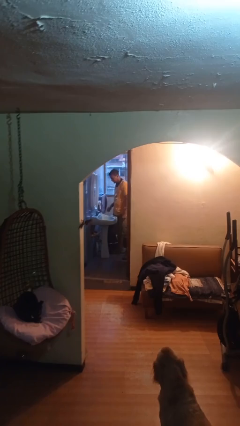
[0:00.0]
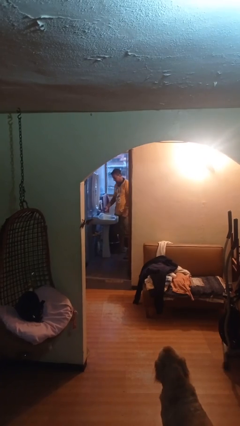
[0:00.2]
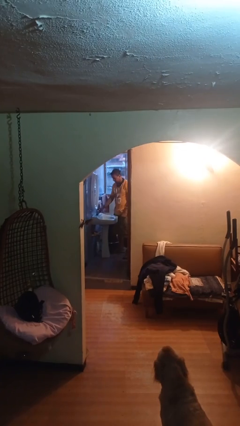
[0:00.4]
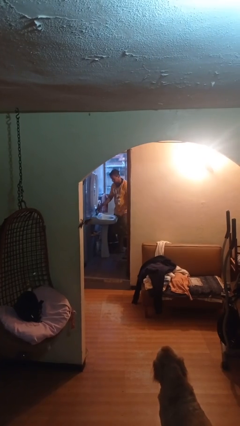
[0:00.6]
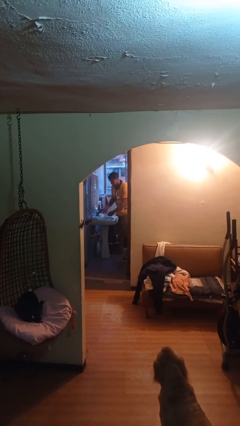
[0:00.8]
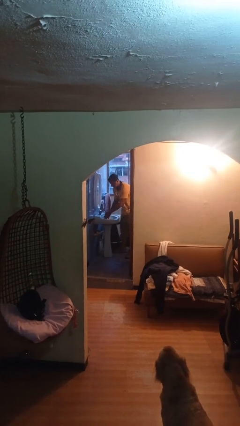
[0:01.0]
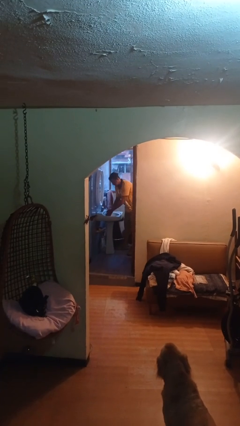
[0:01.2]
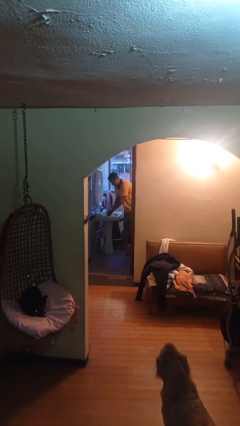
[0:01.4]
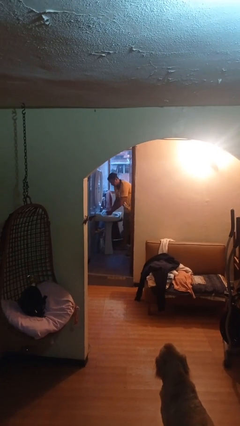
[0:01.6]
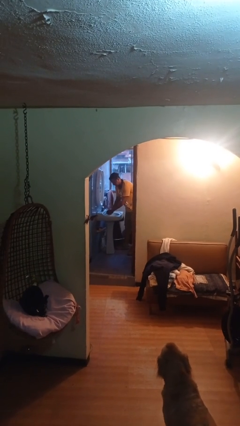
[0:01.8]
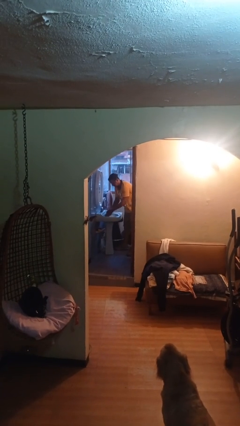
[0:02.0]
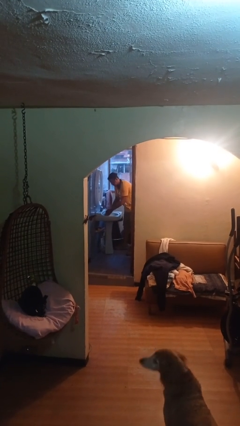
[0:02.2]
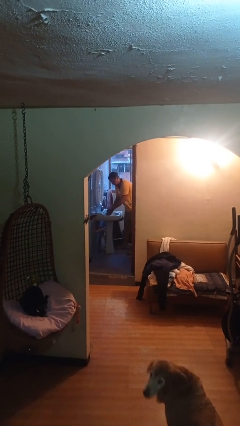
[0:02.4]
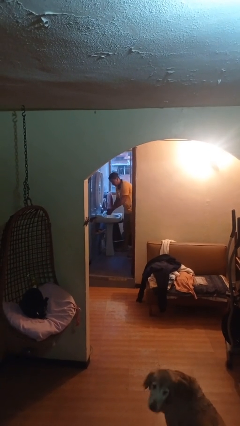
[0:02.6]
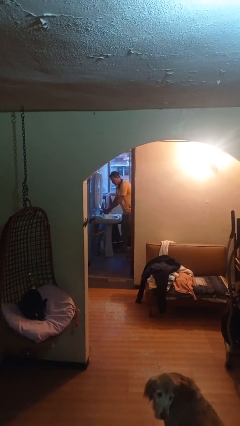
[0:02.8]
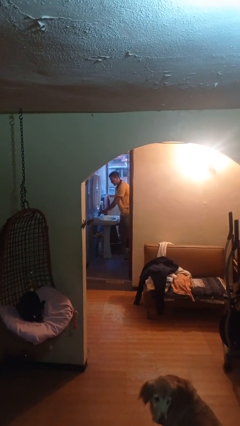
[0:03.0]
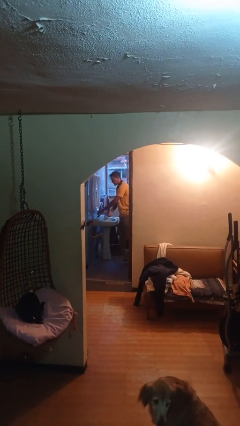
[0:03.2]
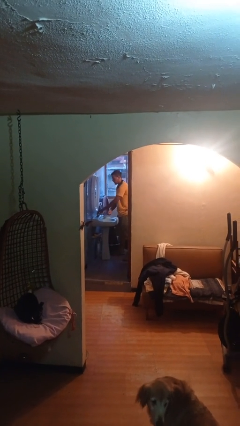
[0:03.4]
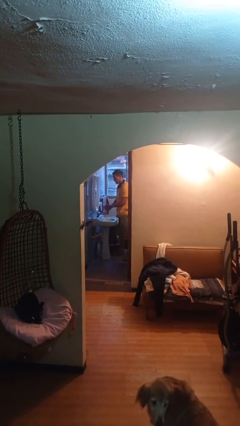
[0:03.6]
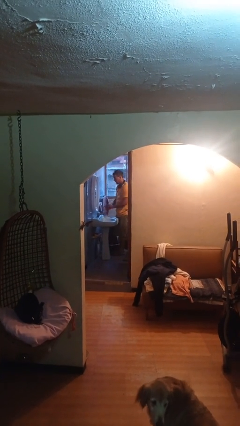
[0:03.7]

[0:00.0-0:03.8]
person washes hands

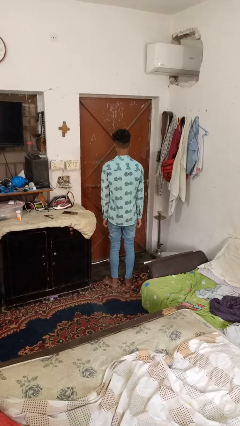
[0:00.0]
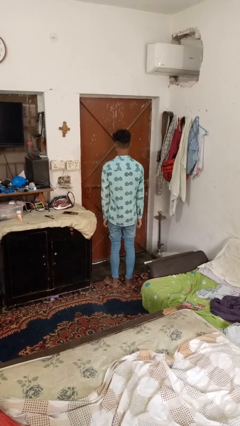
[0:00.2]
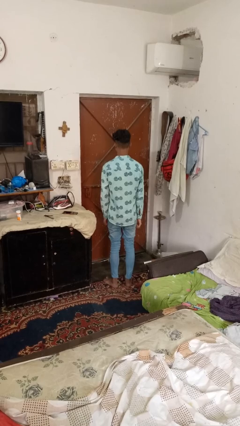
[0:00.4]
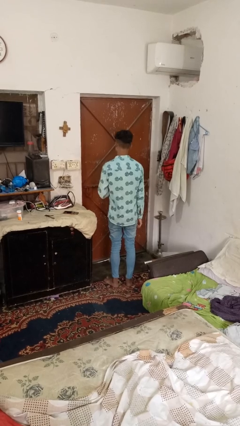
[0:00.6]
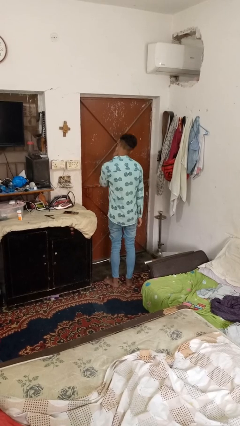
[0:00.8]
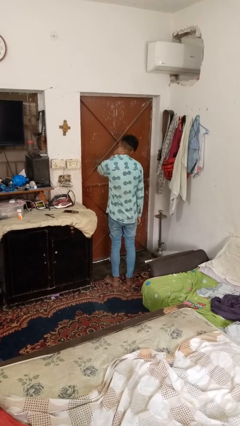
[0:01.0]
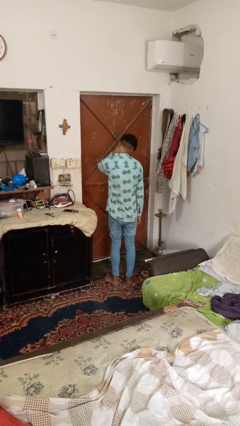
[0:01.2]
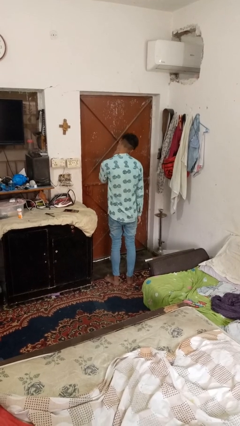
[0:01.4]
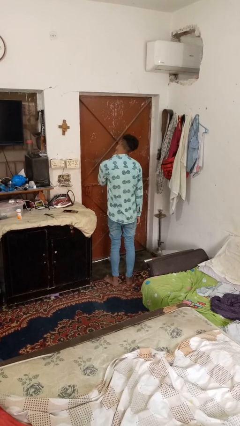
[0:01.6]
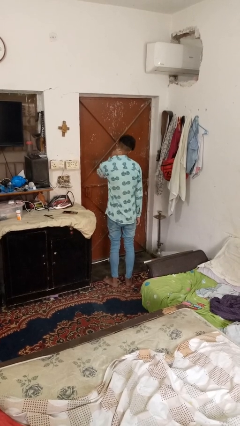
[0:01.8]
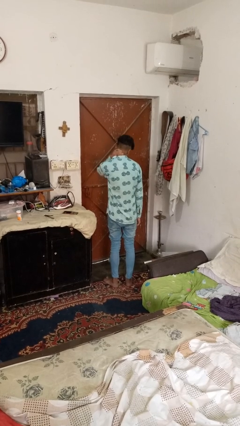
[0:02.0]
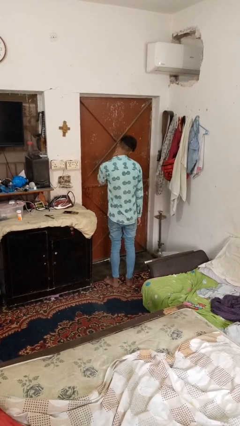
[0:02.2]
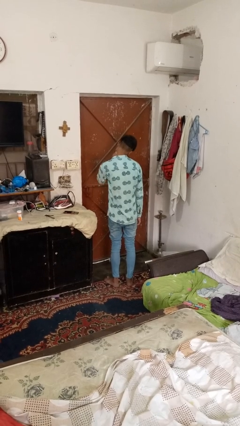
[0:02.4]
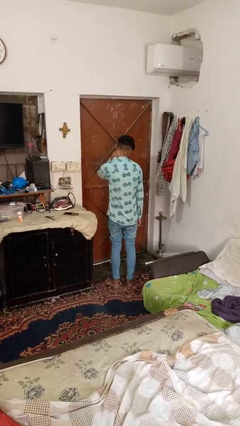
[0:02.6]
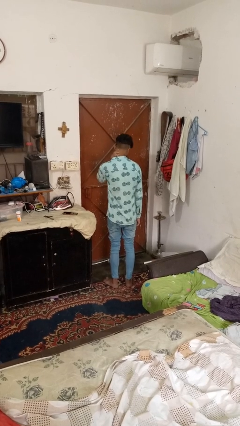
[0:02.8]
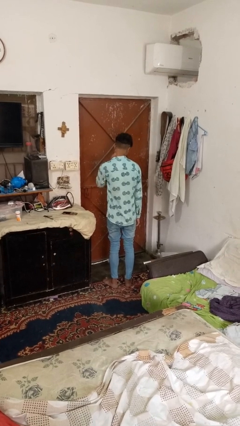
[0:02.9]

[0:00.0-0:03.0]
person rubs neck

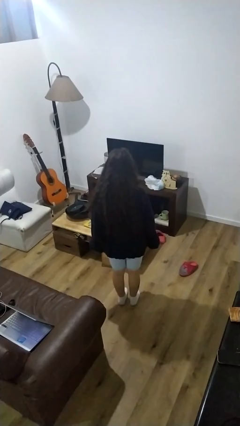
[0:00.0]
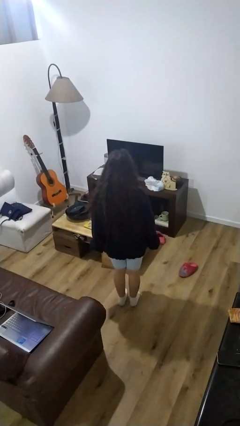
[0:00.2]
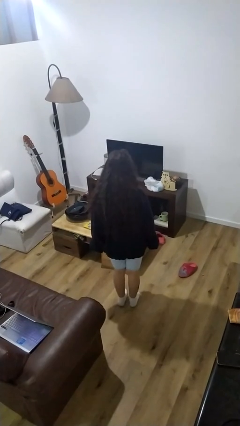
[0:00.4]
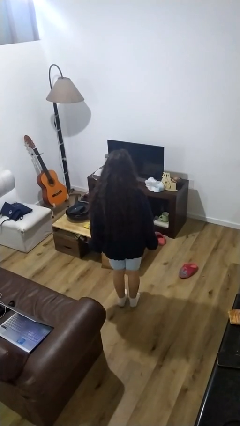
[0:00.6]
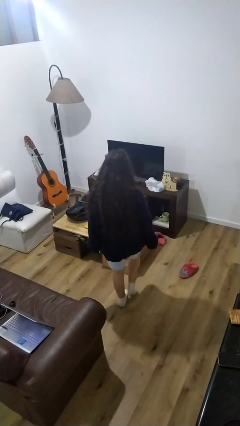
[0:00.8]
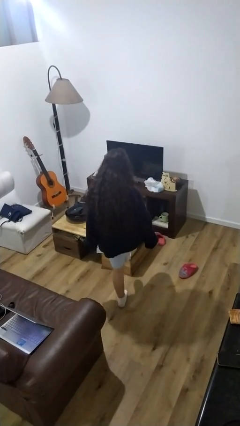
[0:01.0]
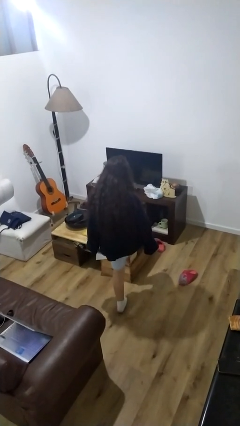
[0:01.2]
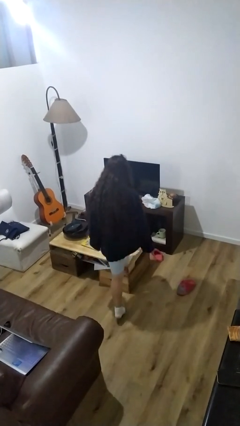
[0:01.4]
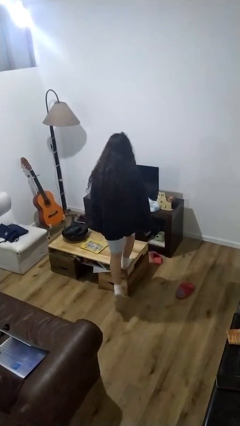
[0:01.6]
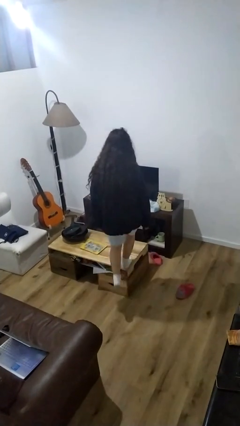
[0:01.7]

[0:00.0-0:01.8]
person climbs on table

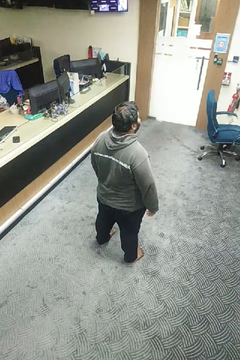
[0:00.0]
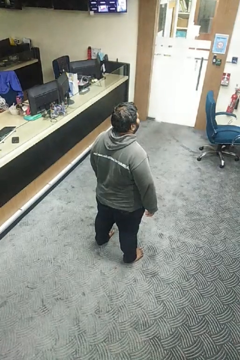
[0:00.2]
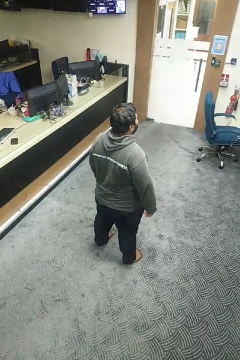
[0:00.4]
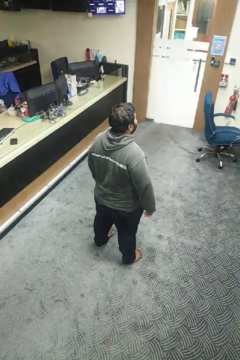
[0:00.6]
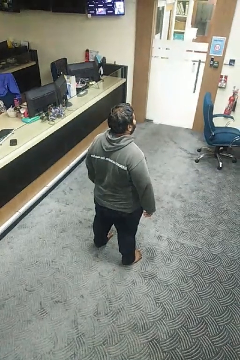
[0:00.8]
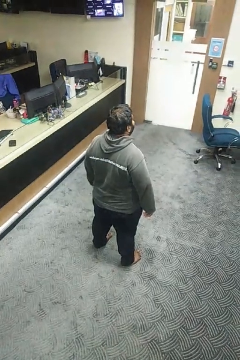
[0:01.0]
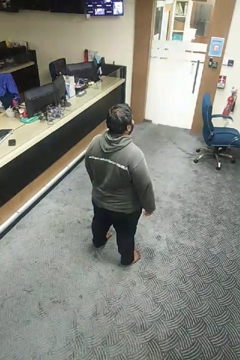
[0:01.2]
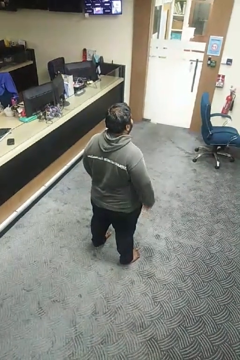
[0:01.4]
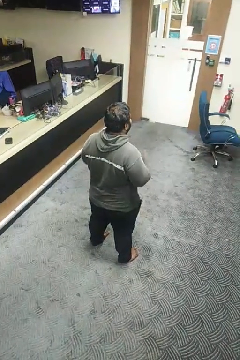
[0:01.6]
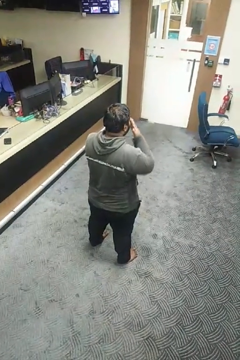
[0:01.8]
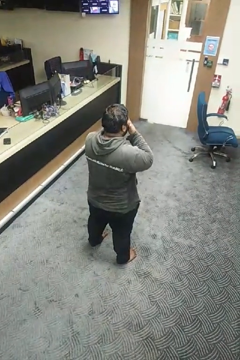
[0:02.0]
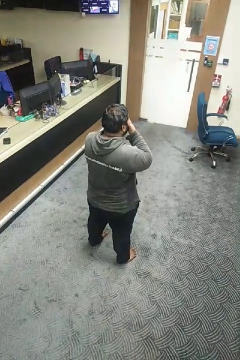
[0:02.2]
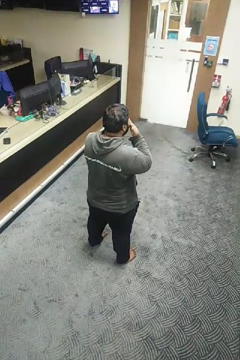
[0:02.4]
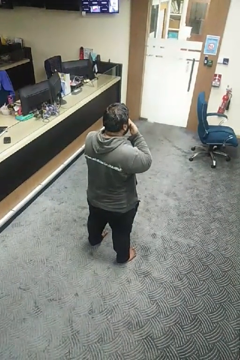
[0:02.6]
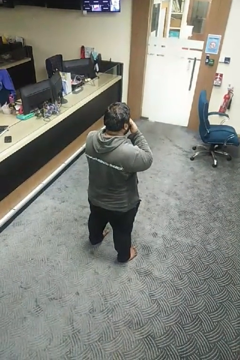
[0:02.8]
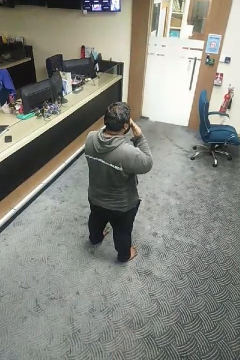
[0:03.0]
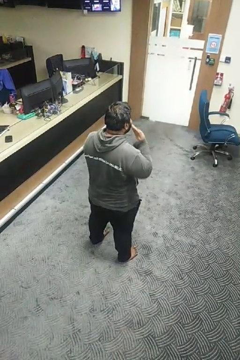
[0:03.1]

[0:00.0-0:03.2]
person rubs eyes

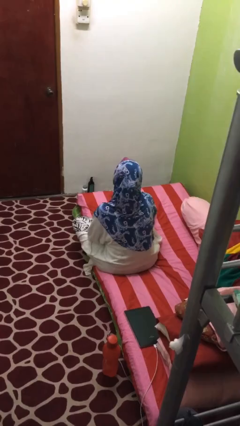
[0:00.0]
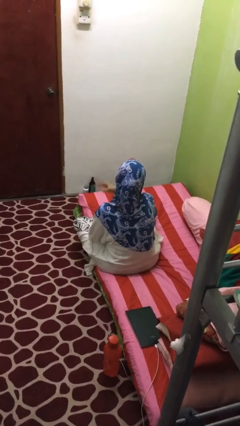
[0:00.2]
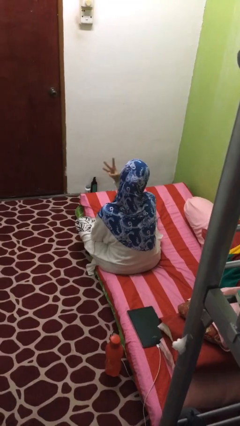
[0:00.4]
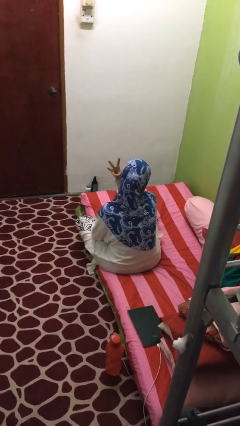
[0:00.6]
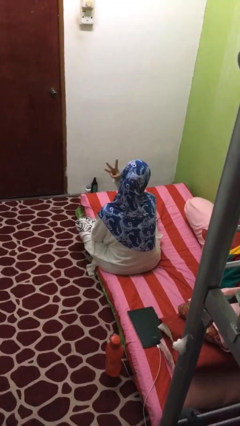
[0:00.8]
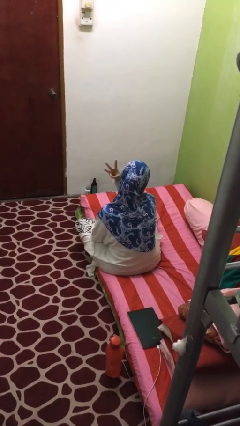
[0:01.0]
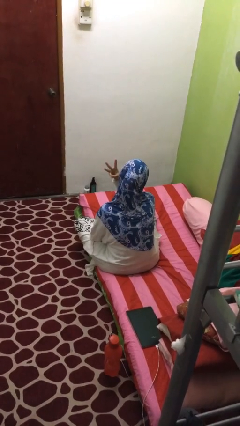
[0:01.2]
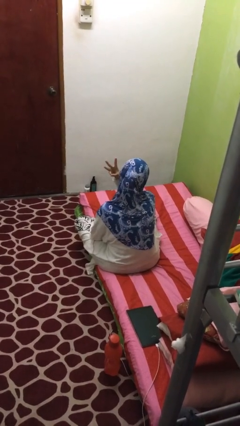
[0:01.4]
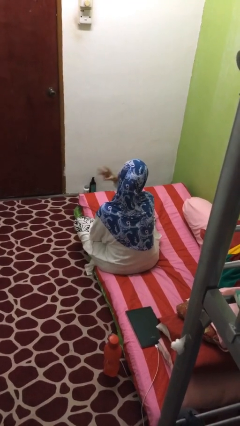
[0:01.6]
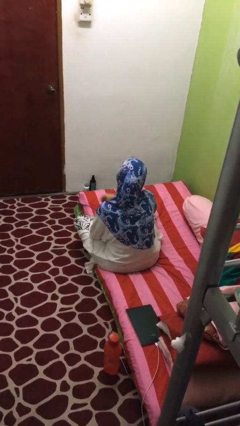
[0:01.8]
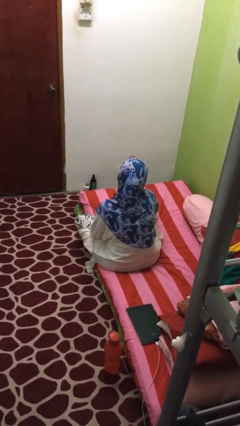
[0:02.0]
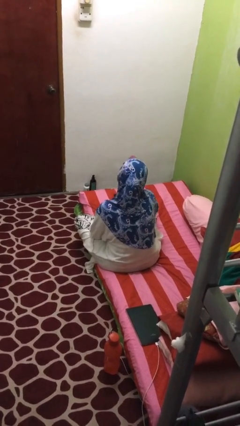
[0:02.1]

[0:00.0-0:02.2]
person gestures number three

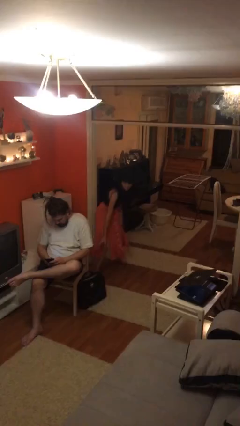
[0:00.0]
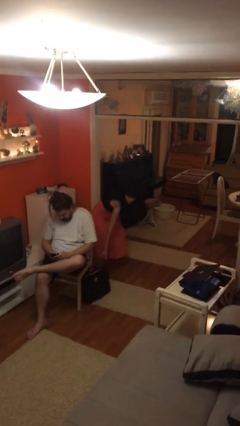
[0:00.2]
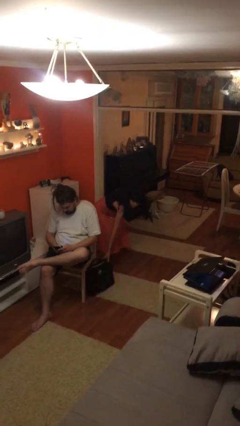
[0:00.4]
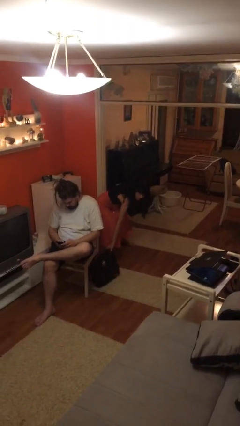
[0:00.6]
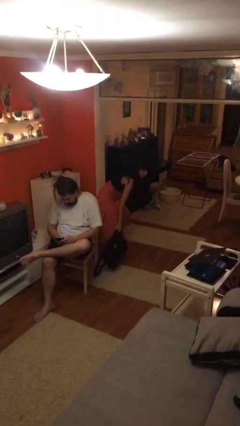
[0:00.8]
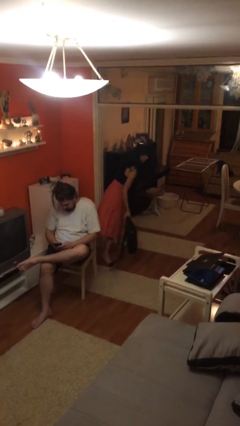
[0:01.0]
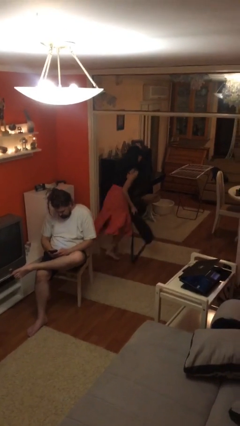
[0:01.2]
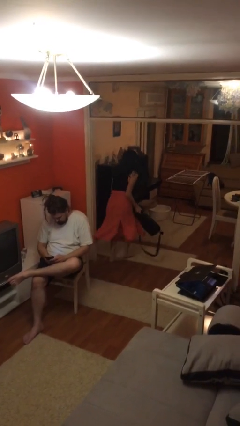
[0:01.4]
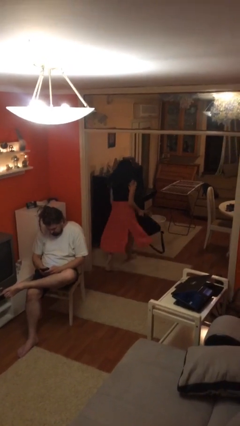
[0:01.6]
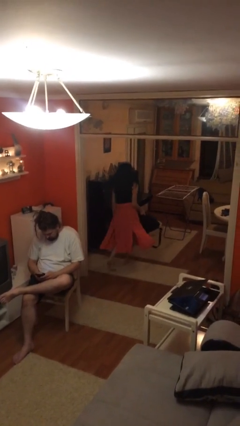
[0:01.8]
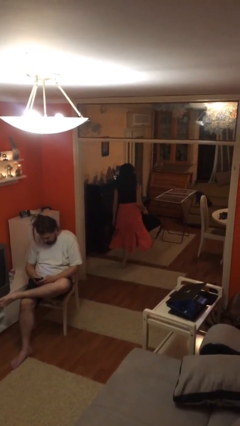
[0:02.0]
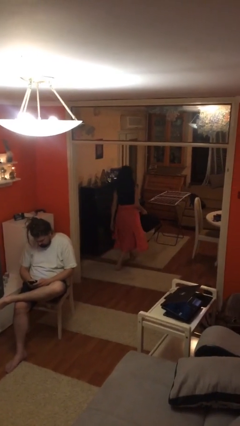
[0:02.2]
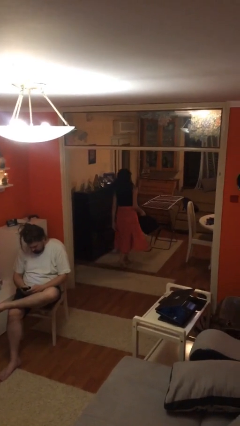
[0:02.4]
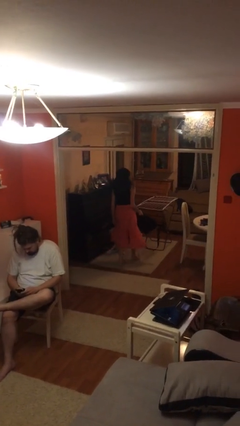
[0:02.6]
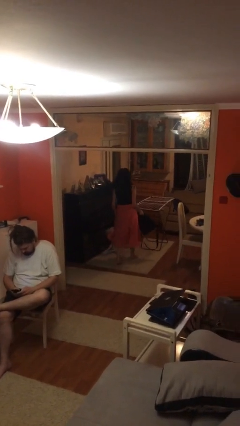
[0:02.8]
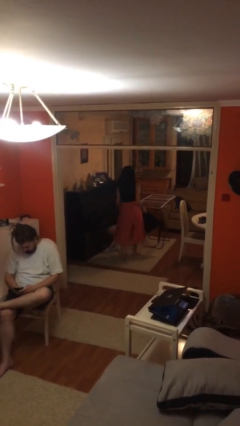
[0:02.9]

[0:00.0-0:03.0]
person steals object from person

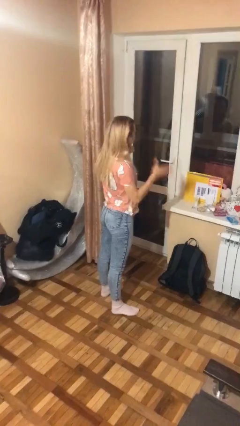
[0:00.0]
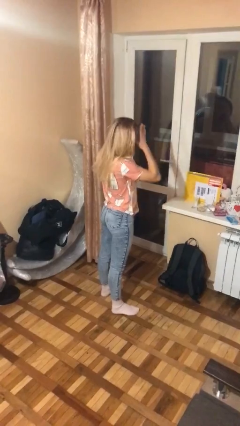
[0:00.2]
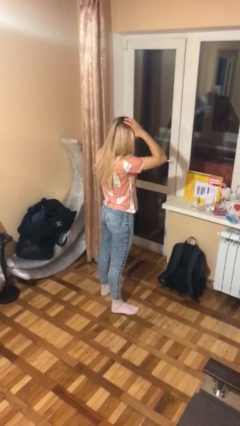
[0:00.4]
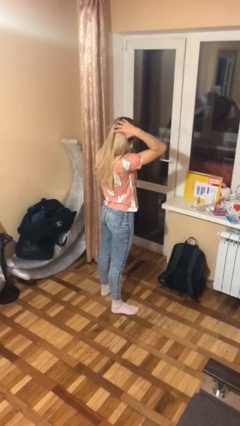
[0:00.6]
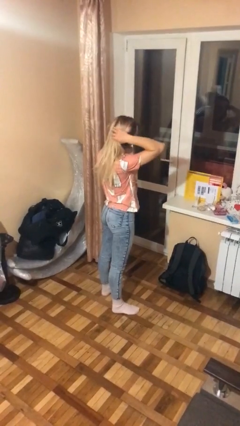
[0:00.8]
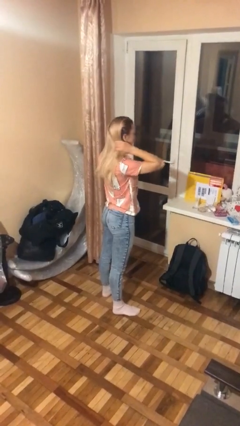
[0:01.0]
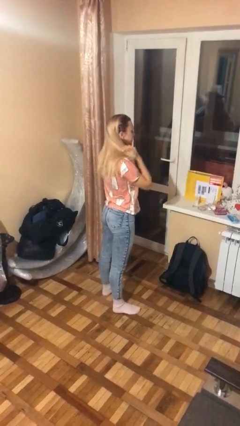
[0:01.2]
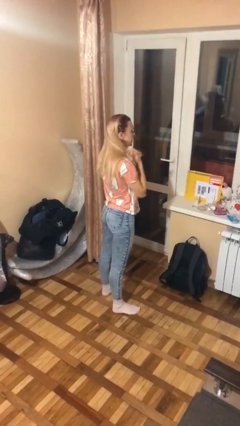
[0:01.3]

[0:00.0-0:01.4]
person strokes hair
